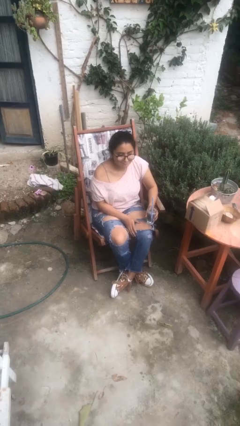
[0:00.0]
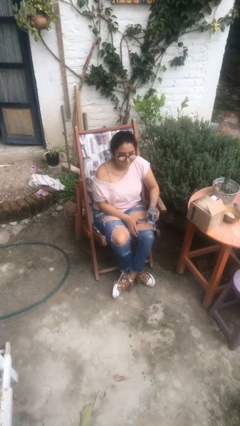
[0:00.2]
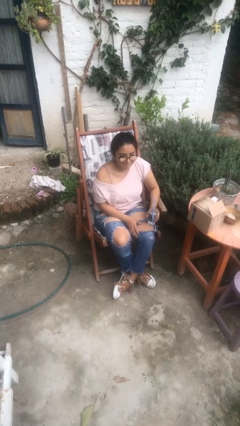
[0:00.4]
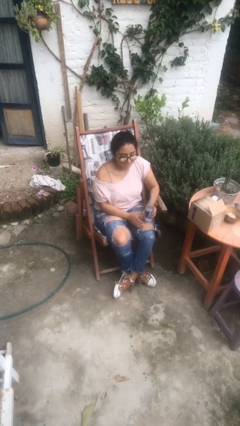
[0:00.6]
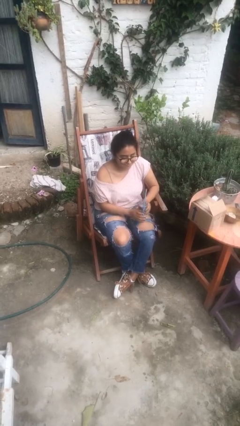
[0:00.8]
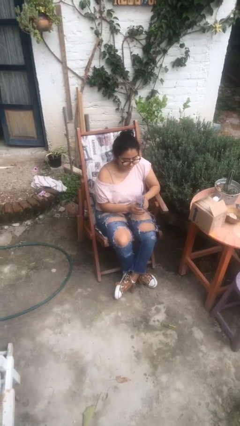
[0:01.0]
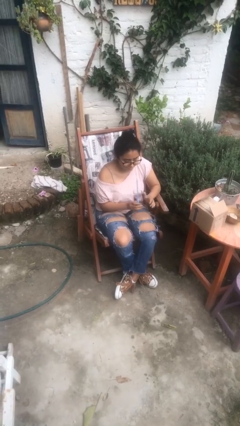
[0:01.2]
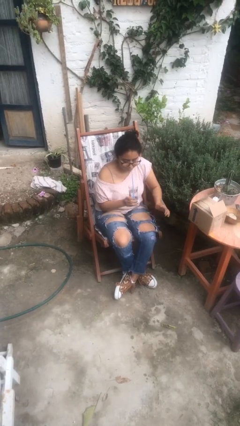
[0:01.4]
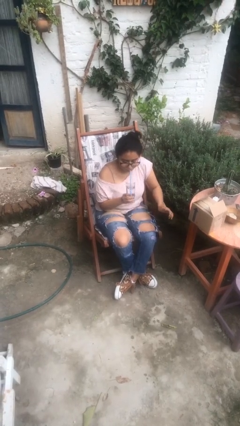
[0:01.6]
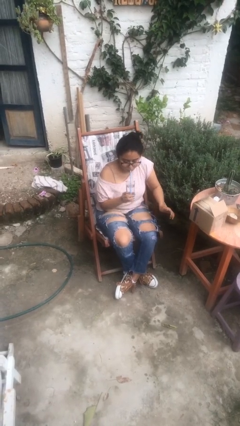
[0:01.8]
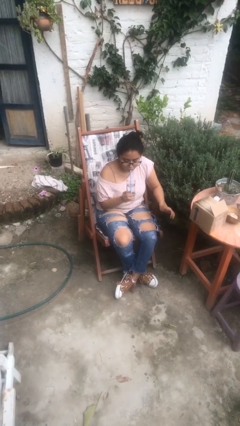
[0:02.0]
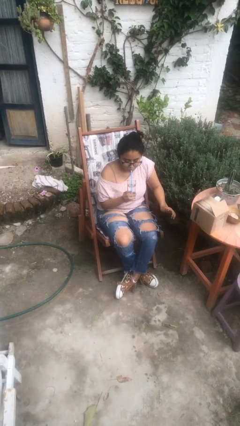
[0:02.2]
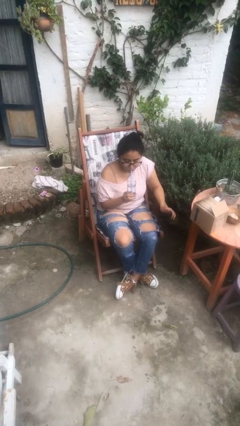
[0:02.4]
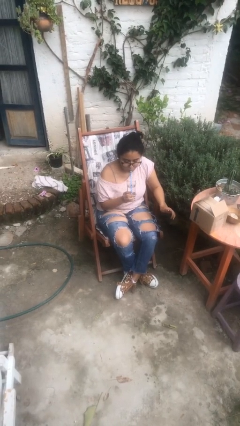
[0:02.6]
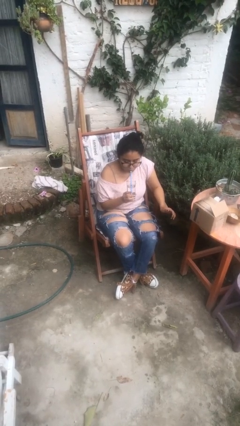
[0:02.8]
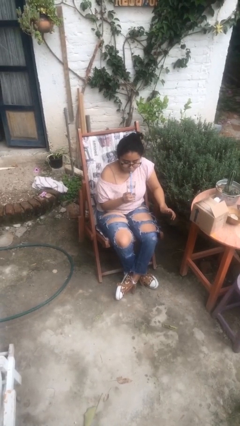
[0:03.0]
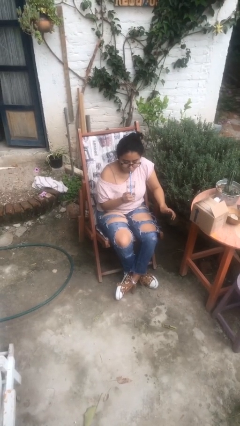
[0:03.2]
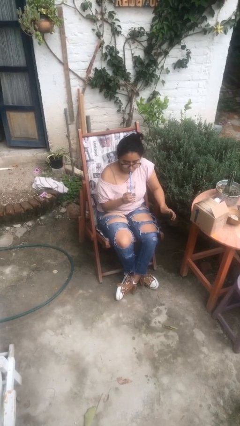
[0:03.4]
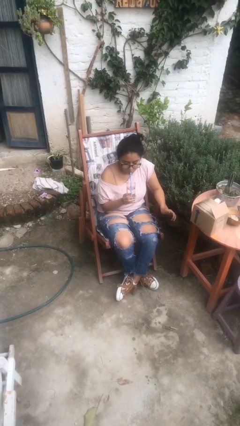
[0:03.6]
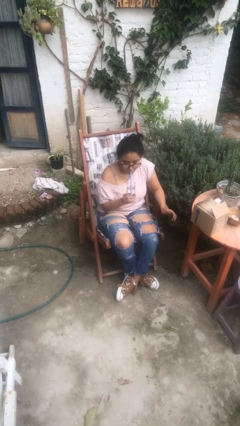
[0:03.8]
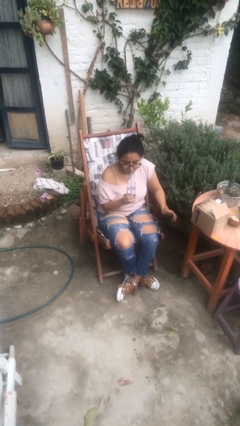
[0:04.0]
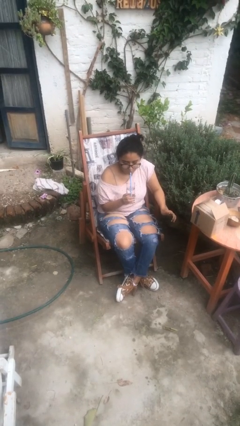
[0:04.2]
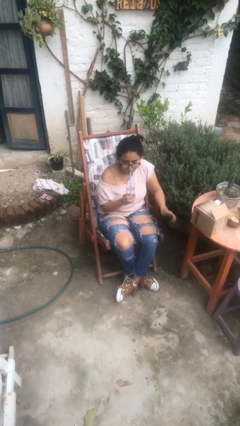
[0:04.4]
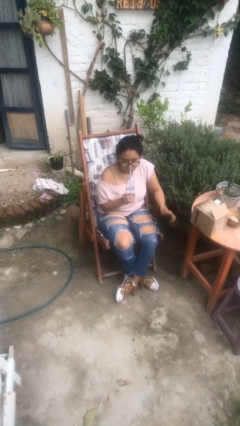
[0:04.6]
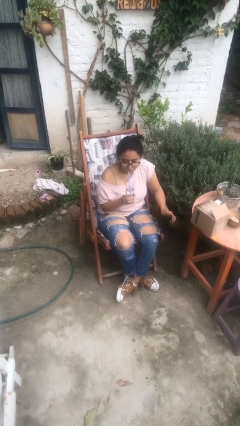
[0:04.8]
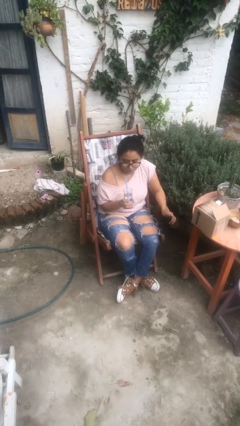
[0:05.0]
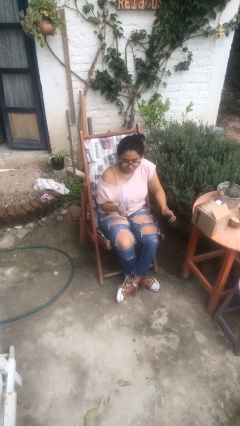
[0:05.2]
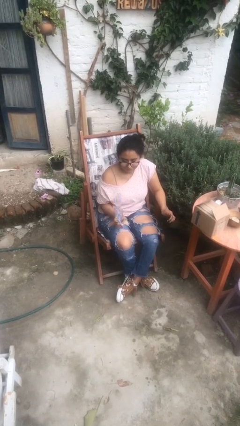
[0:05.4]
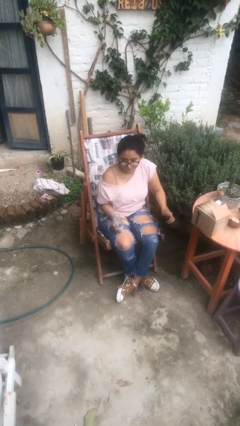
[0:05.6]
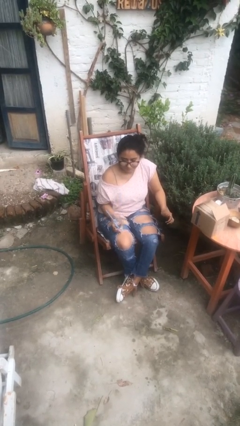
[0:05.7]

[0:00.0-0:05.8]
person drinks from straw

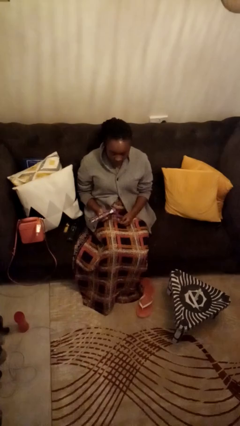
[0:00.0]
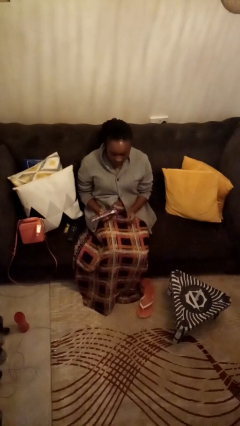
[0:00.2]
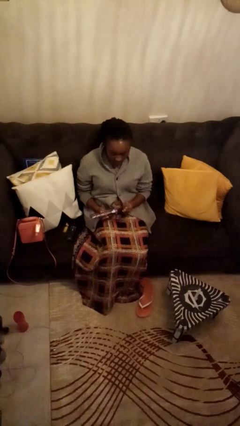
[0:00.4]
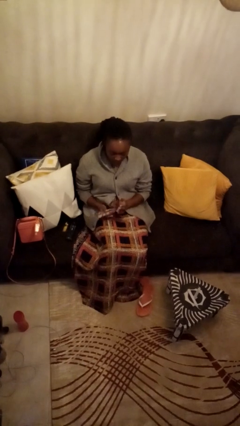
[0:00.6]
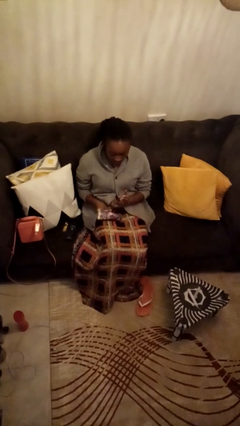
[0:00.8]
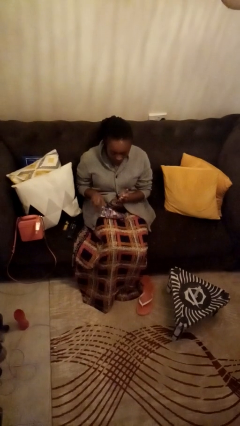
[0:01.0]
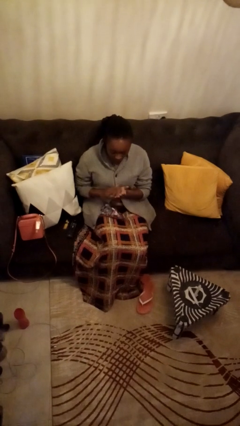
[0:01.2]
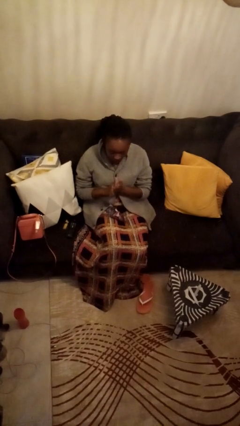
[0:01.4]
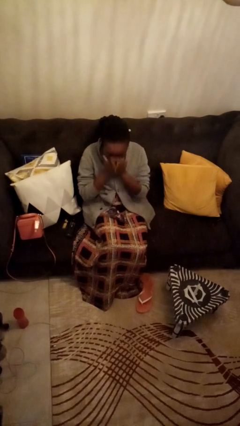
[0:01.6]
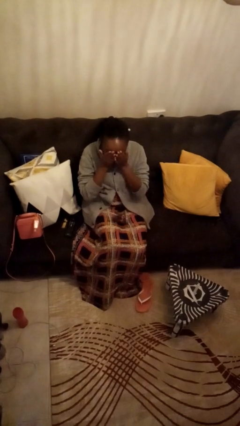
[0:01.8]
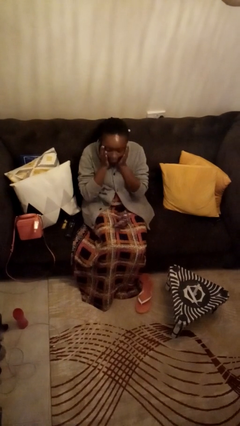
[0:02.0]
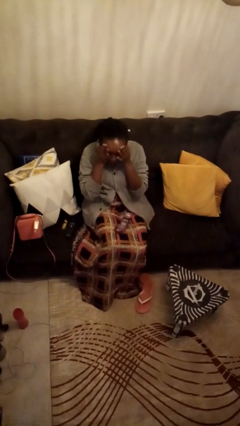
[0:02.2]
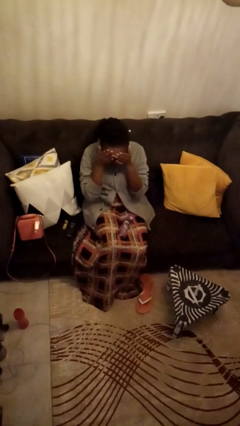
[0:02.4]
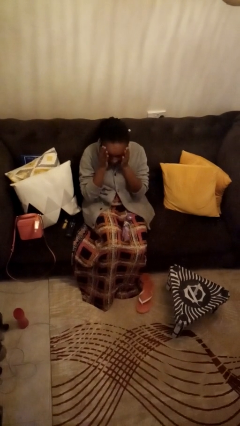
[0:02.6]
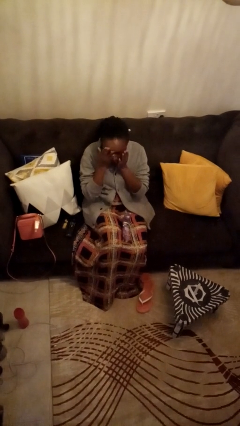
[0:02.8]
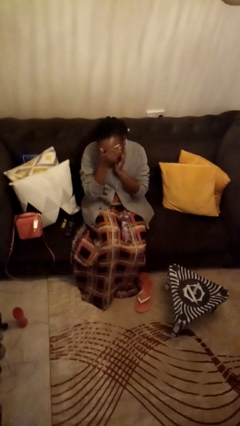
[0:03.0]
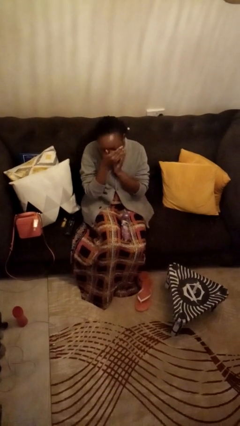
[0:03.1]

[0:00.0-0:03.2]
person applies facial moisturizer

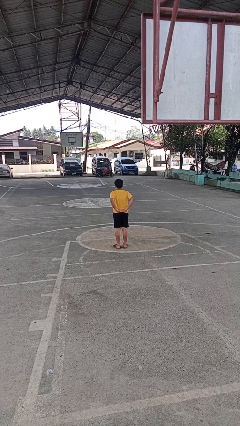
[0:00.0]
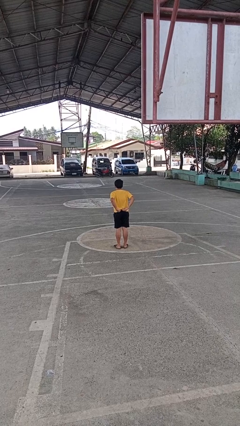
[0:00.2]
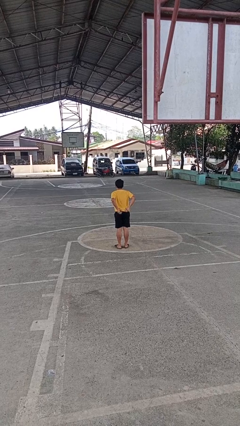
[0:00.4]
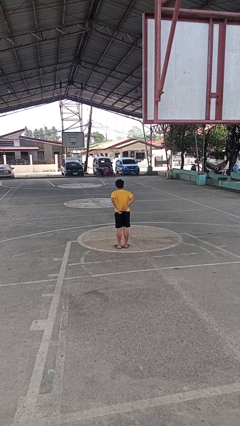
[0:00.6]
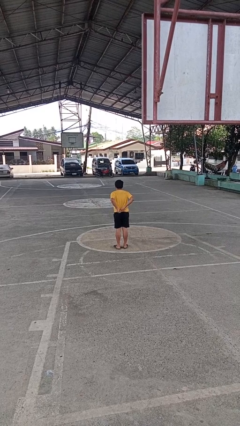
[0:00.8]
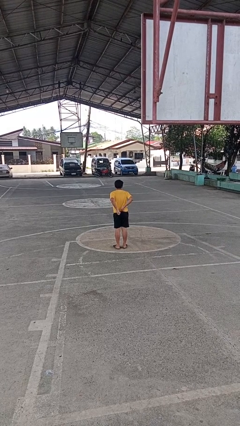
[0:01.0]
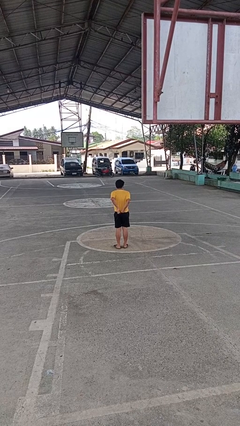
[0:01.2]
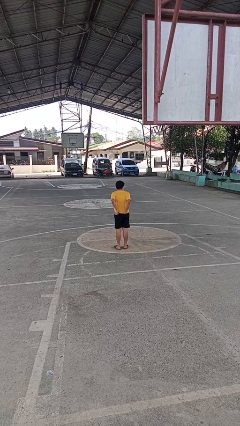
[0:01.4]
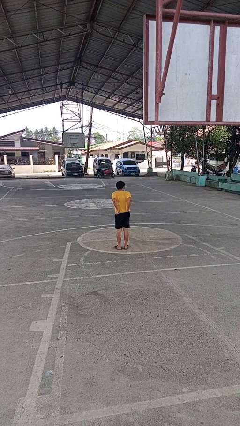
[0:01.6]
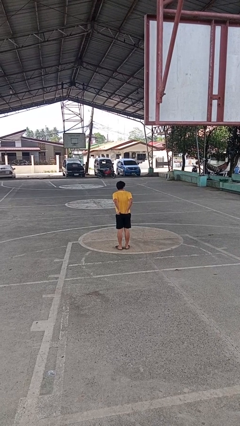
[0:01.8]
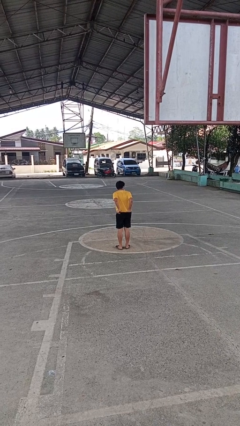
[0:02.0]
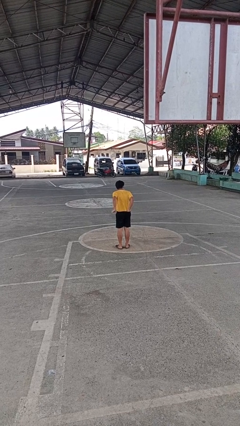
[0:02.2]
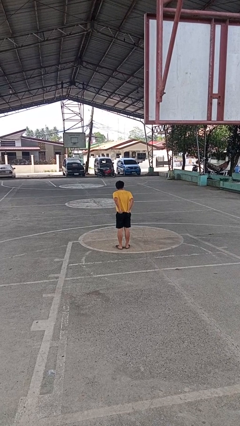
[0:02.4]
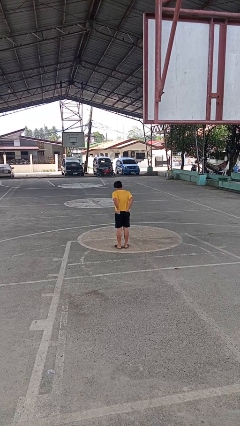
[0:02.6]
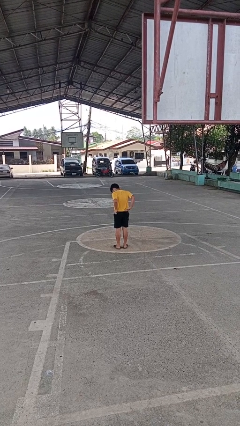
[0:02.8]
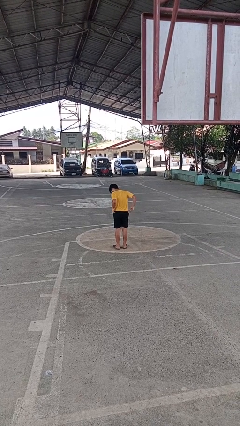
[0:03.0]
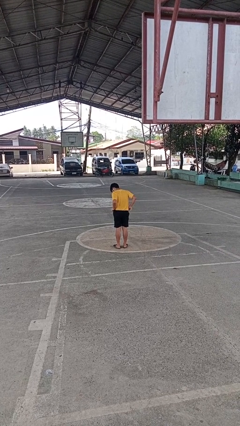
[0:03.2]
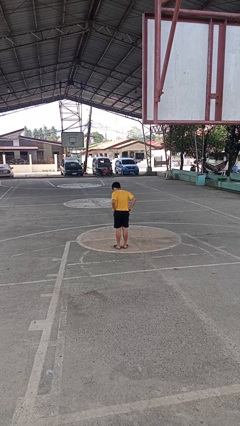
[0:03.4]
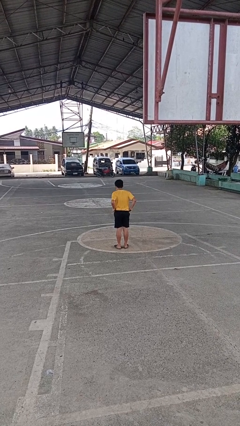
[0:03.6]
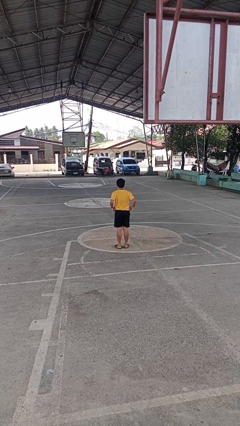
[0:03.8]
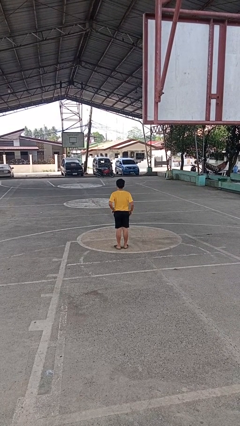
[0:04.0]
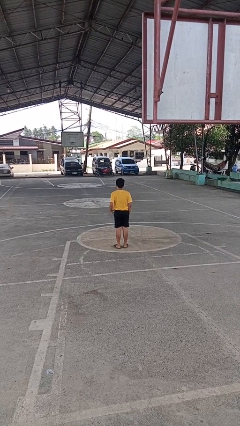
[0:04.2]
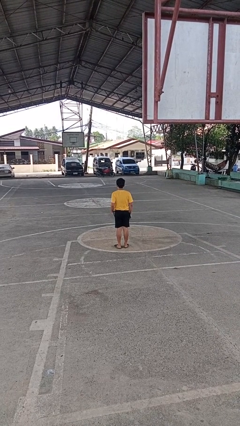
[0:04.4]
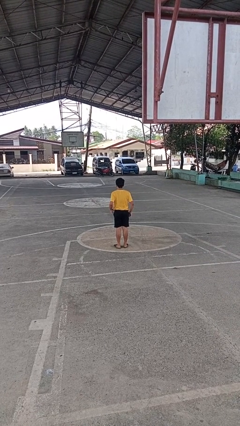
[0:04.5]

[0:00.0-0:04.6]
person tucks in shirt

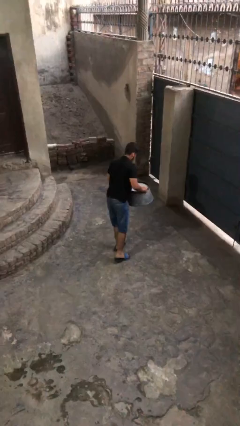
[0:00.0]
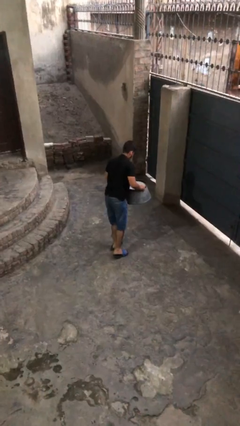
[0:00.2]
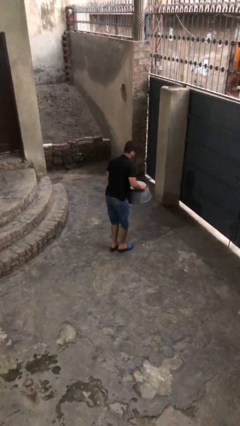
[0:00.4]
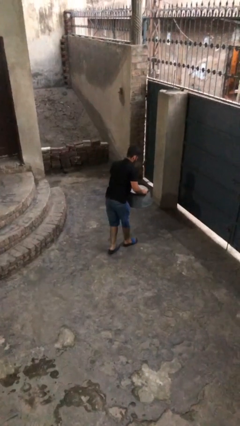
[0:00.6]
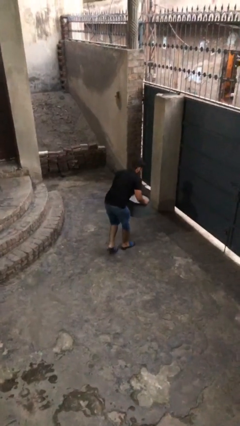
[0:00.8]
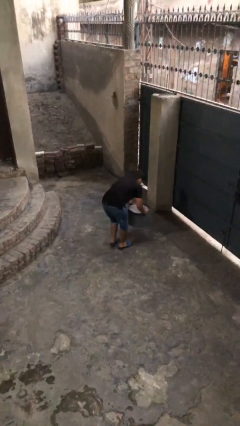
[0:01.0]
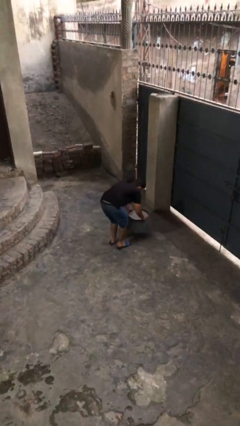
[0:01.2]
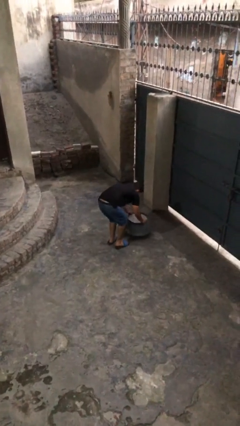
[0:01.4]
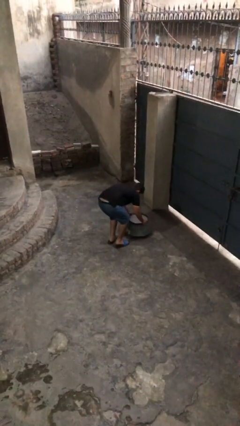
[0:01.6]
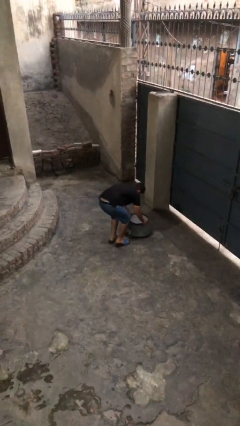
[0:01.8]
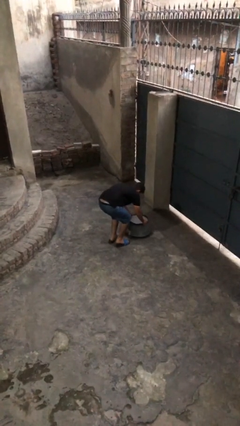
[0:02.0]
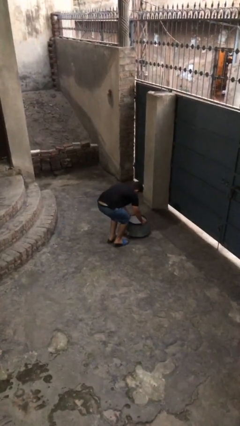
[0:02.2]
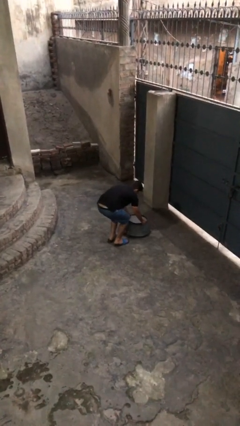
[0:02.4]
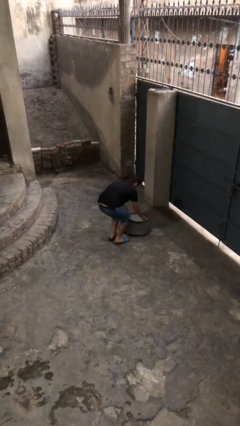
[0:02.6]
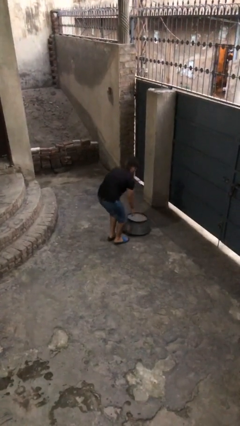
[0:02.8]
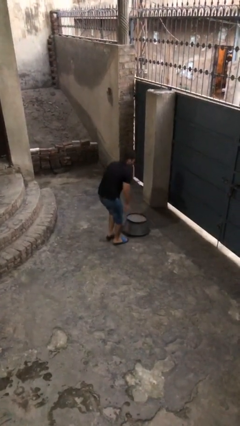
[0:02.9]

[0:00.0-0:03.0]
person puts down object on floor

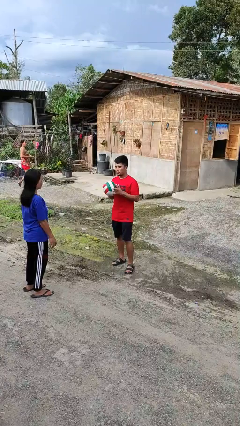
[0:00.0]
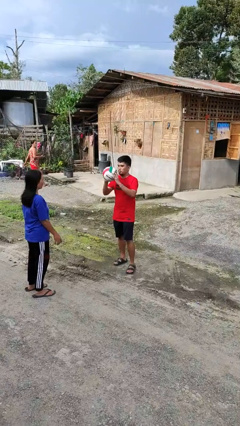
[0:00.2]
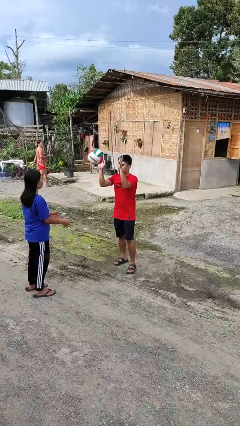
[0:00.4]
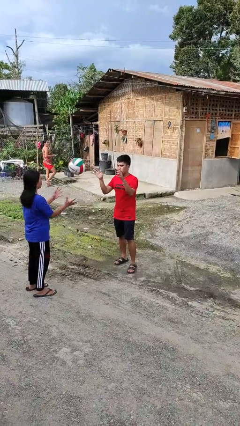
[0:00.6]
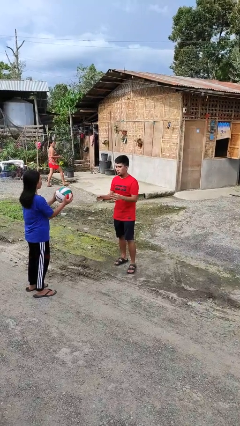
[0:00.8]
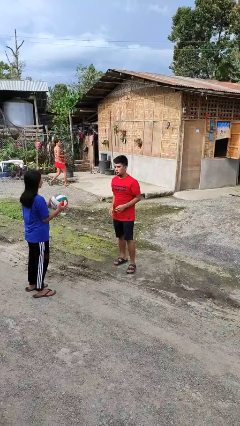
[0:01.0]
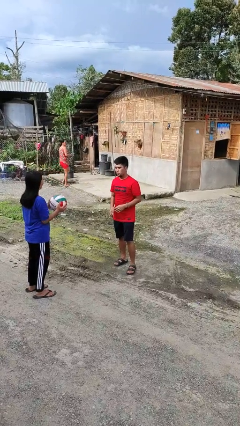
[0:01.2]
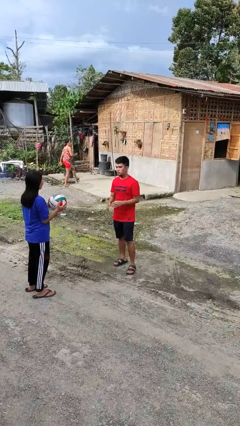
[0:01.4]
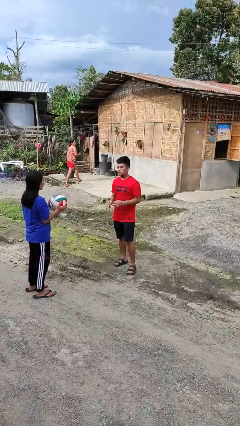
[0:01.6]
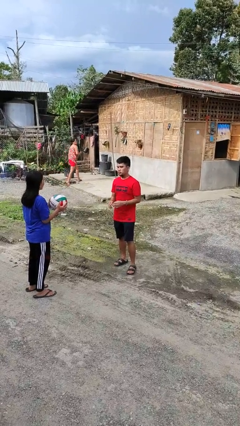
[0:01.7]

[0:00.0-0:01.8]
person throws object to person
